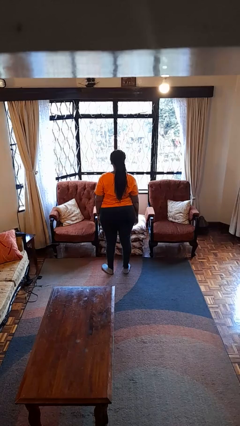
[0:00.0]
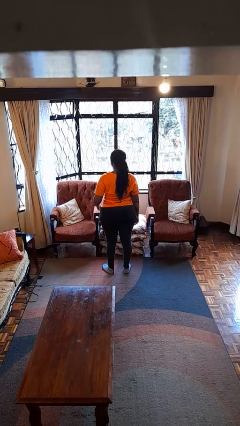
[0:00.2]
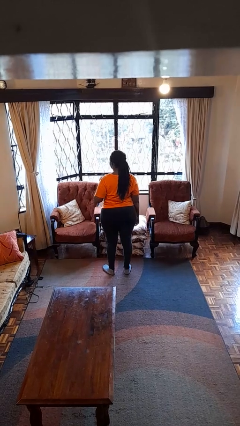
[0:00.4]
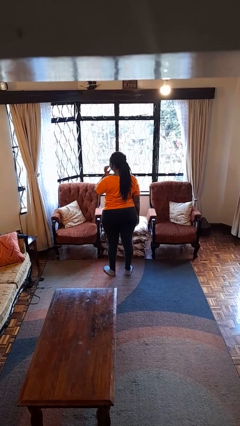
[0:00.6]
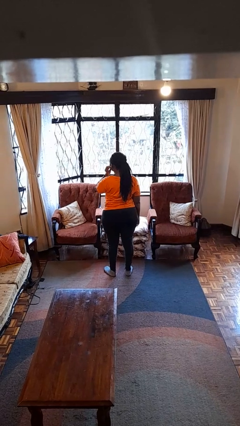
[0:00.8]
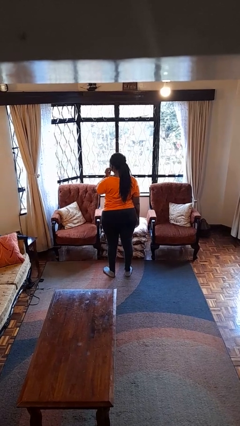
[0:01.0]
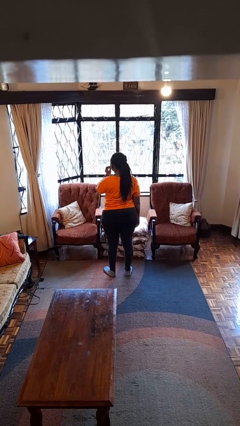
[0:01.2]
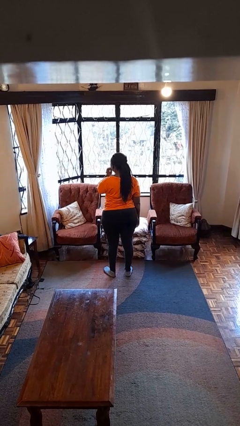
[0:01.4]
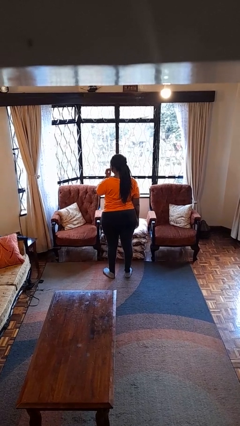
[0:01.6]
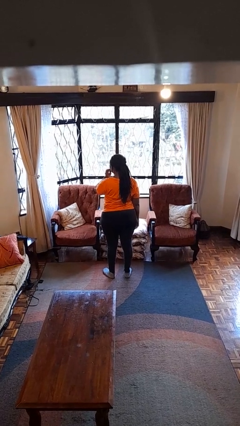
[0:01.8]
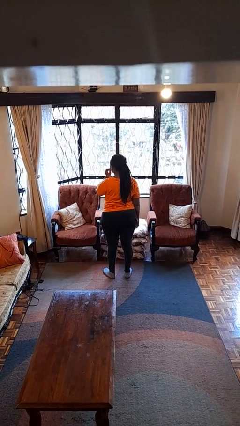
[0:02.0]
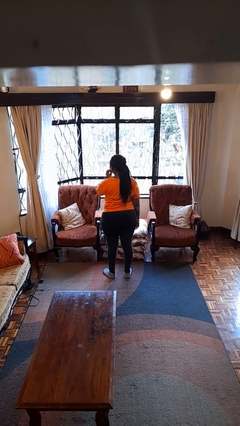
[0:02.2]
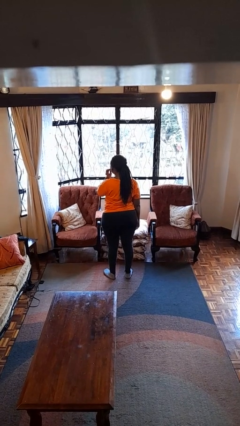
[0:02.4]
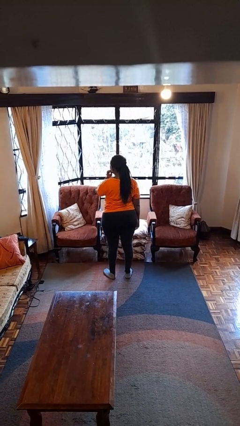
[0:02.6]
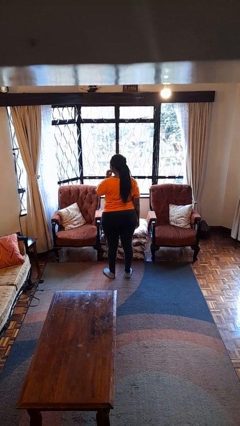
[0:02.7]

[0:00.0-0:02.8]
person touches earlobe

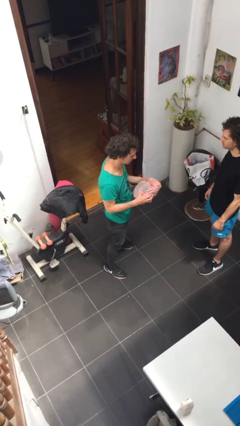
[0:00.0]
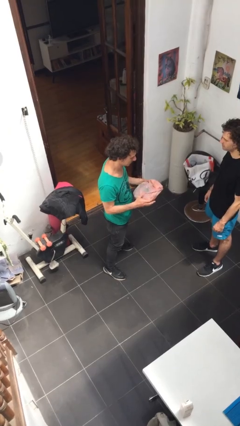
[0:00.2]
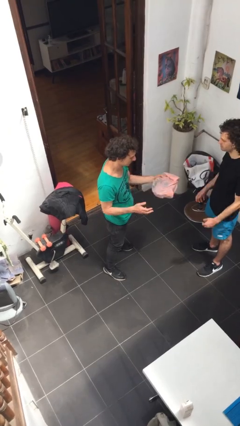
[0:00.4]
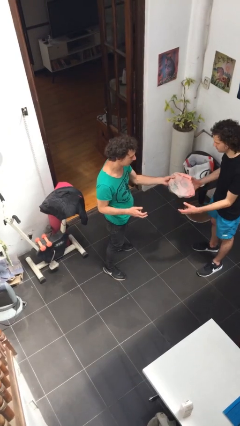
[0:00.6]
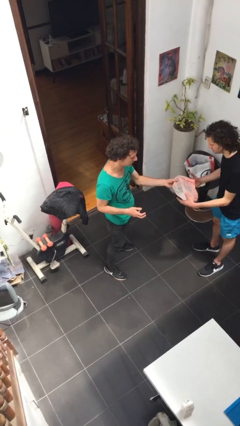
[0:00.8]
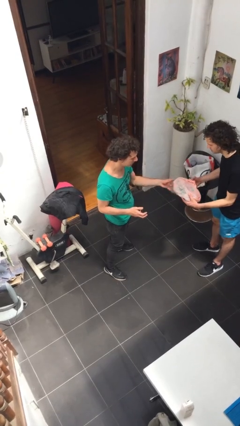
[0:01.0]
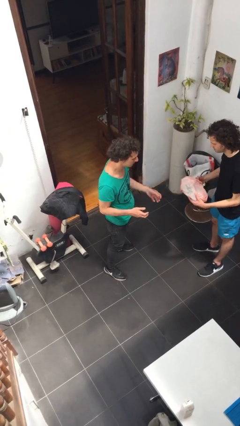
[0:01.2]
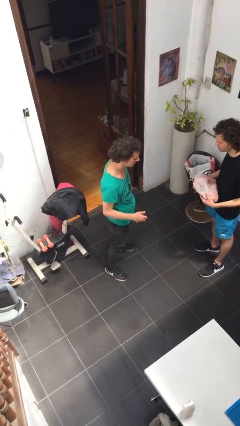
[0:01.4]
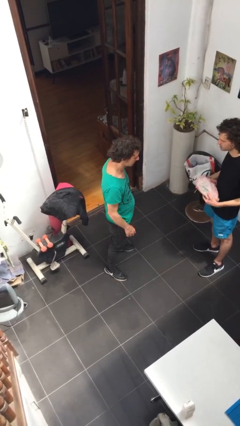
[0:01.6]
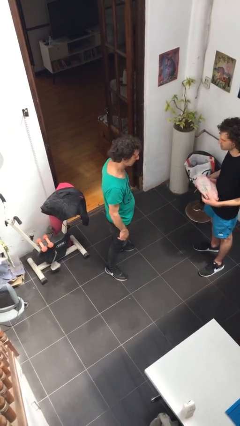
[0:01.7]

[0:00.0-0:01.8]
person transfers object to person

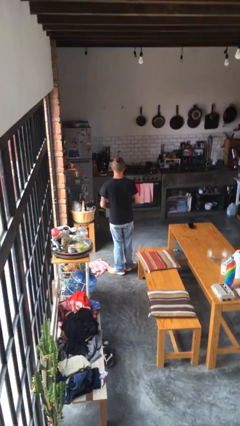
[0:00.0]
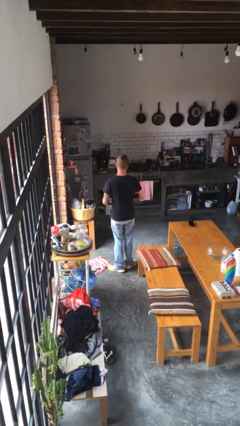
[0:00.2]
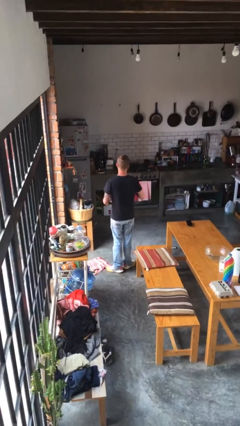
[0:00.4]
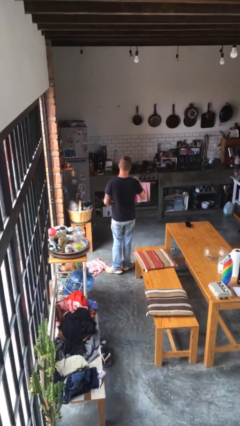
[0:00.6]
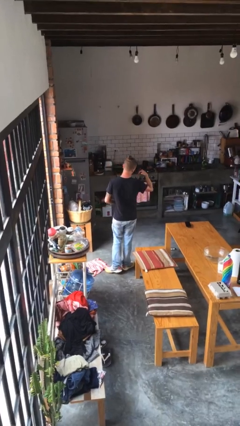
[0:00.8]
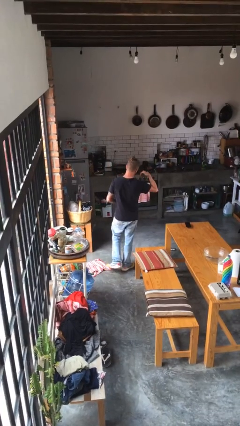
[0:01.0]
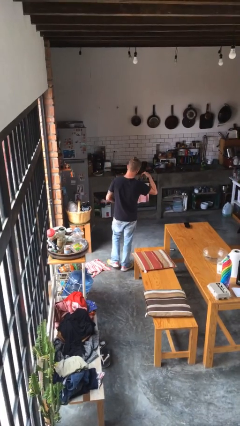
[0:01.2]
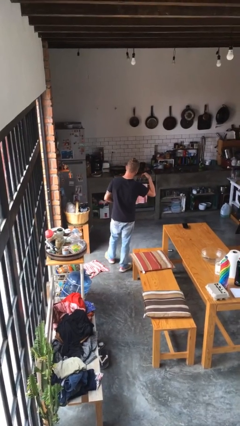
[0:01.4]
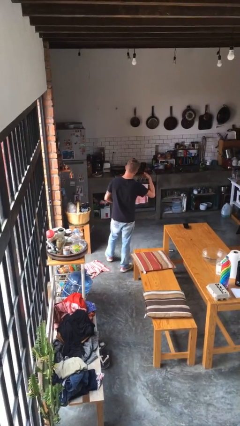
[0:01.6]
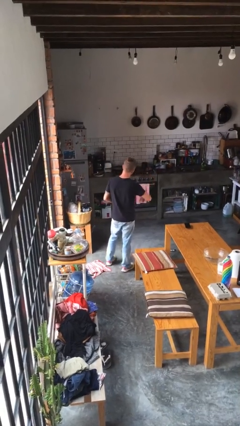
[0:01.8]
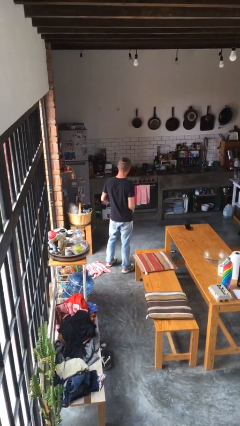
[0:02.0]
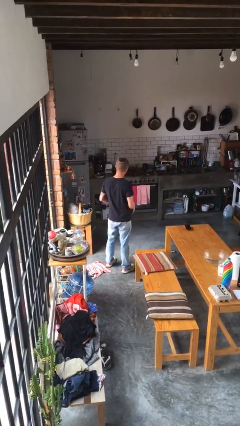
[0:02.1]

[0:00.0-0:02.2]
person gestures call me

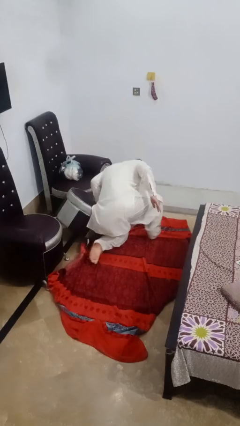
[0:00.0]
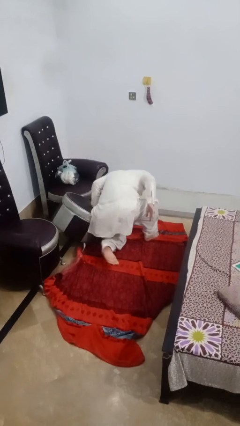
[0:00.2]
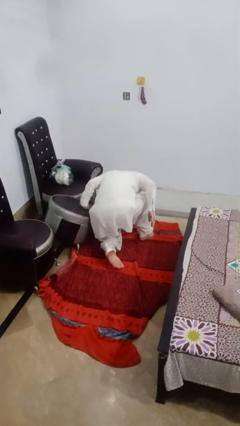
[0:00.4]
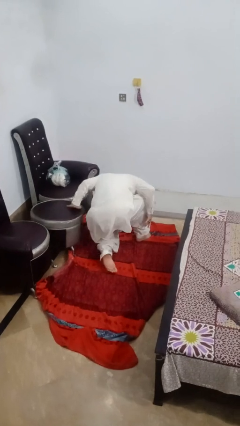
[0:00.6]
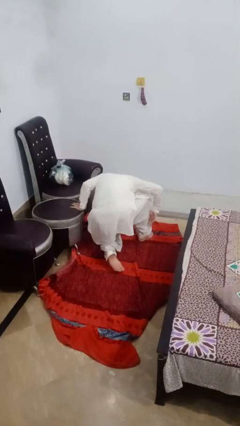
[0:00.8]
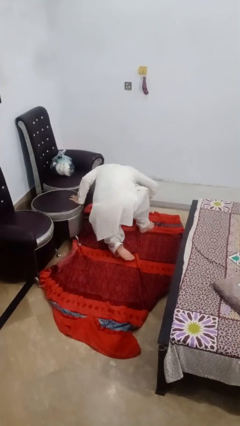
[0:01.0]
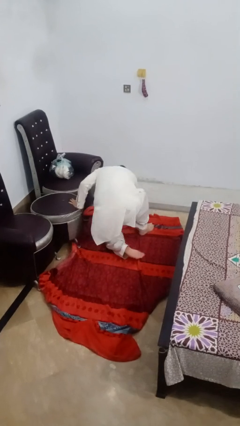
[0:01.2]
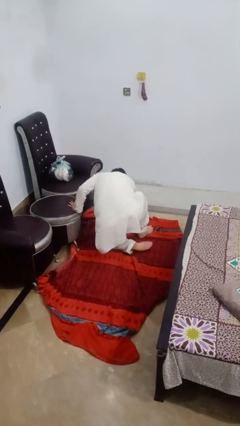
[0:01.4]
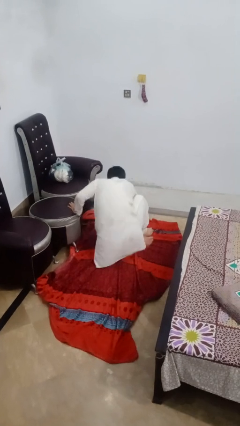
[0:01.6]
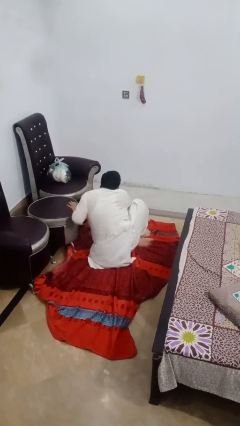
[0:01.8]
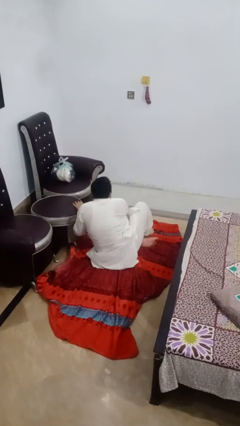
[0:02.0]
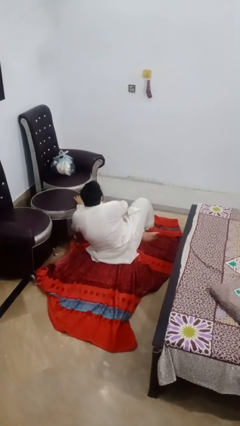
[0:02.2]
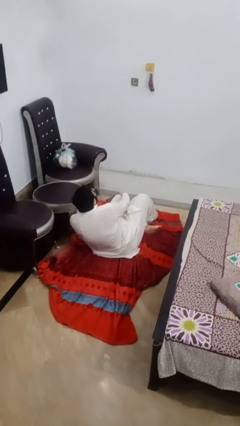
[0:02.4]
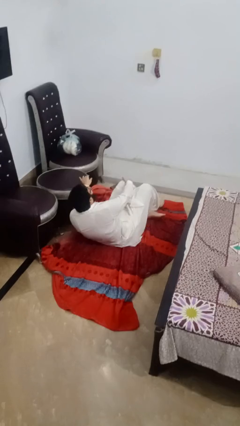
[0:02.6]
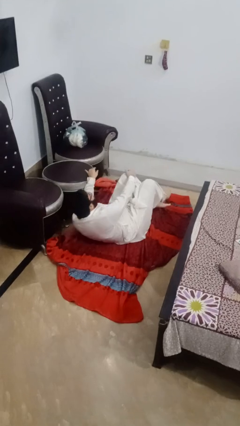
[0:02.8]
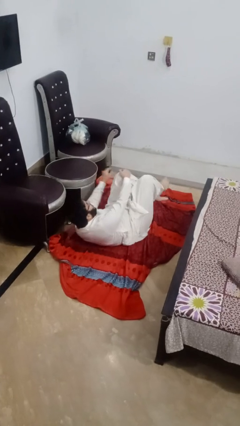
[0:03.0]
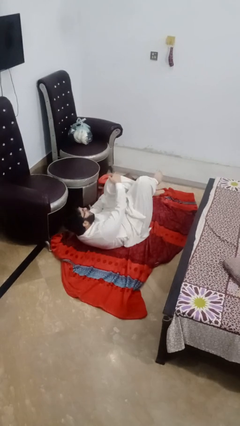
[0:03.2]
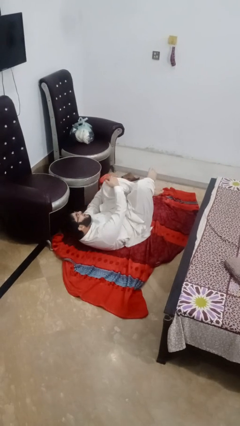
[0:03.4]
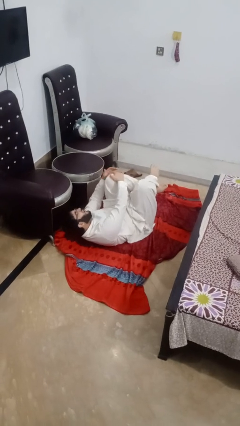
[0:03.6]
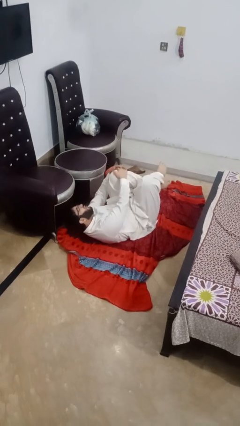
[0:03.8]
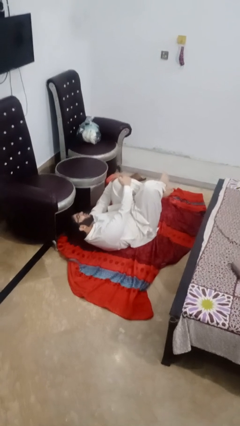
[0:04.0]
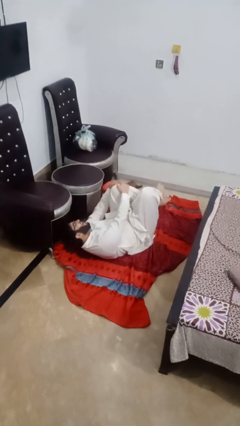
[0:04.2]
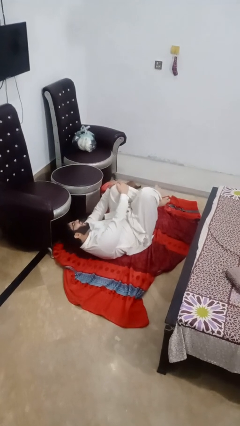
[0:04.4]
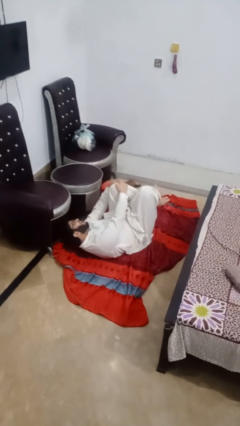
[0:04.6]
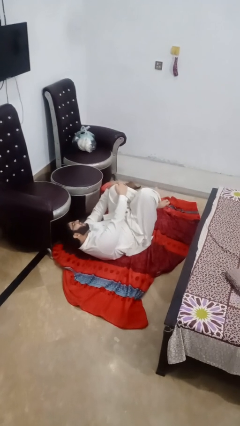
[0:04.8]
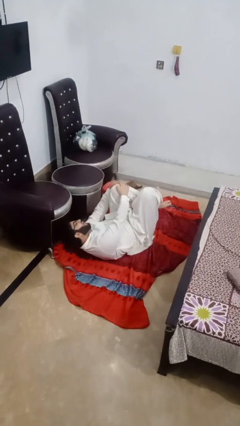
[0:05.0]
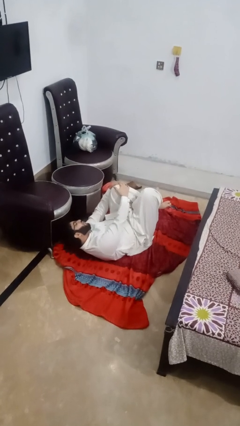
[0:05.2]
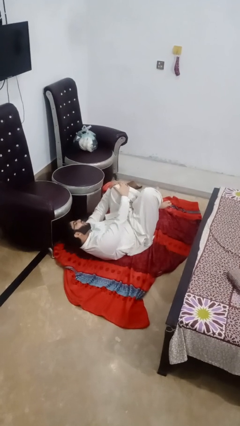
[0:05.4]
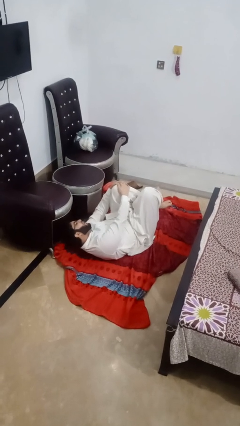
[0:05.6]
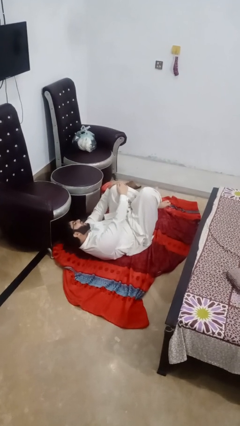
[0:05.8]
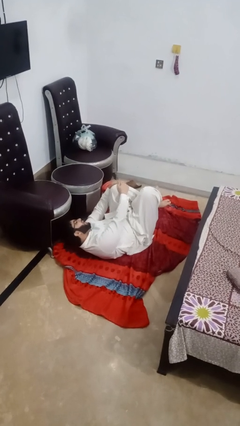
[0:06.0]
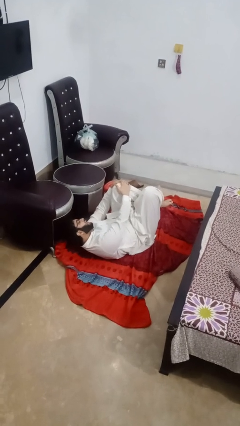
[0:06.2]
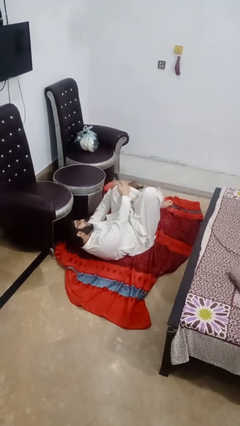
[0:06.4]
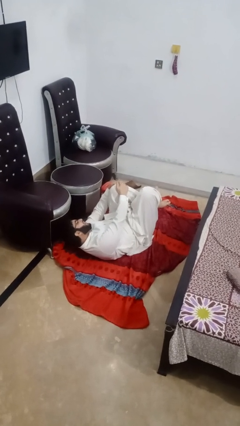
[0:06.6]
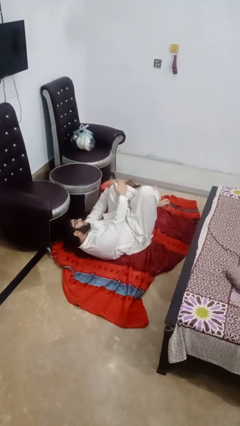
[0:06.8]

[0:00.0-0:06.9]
person lies down on floor

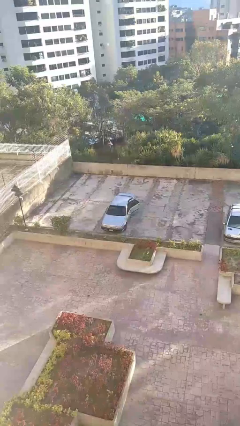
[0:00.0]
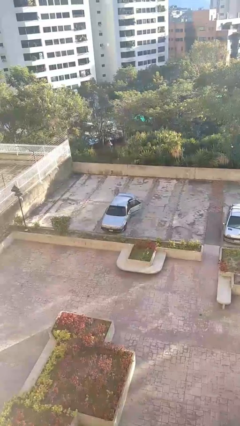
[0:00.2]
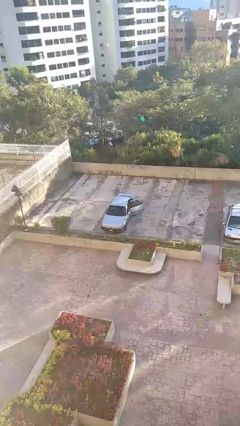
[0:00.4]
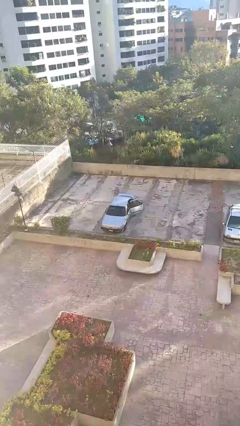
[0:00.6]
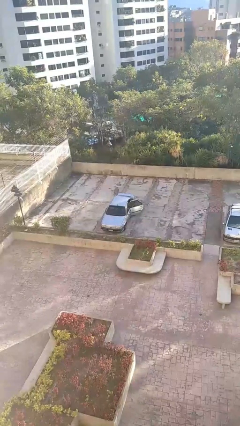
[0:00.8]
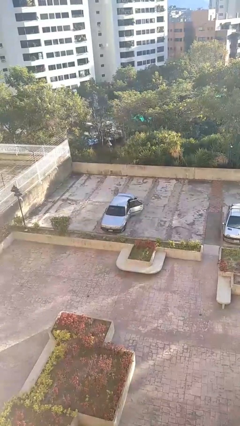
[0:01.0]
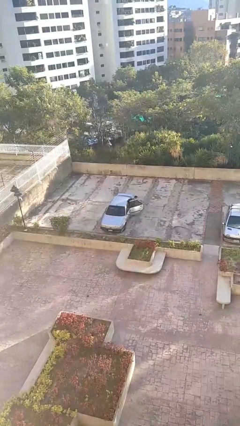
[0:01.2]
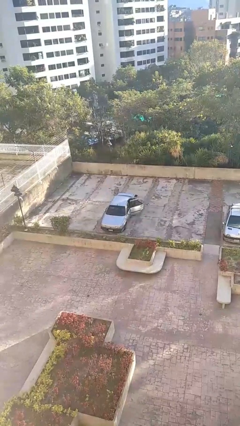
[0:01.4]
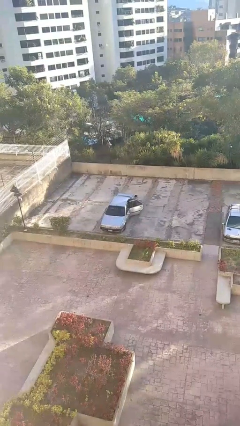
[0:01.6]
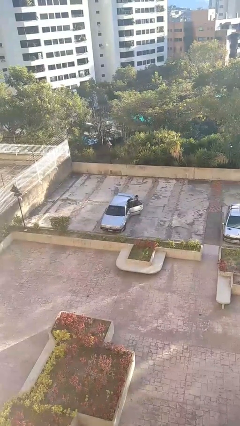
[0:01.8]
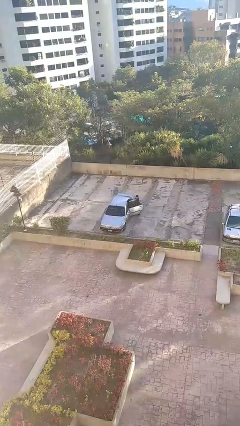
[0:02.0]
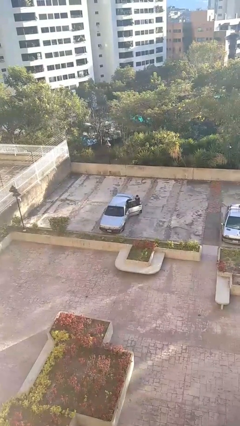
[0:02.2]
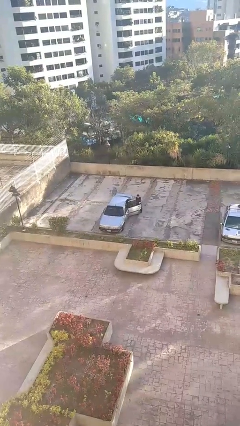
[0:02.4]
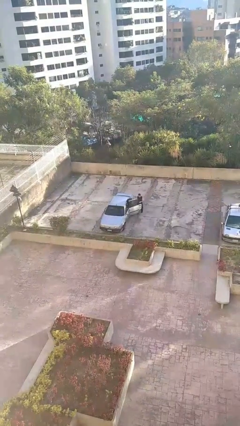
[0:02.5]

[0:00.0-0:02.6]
car drops off person

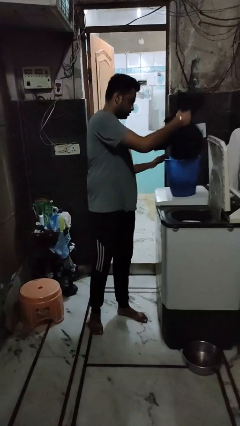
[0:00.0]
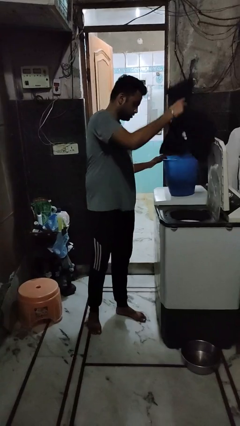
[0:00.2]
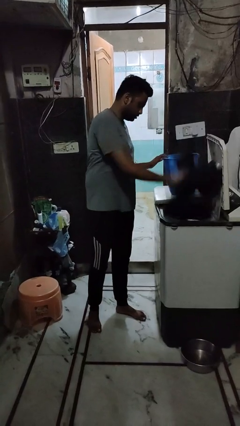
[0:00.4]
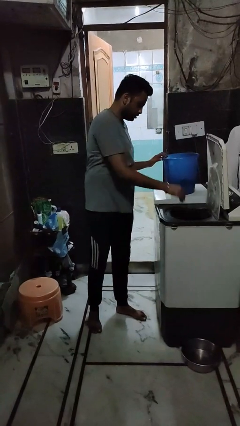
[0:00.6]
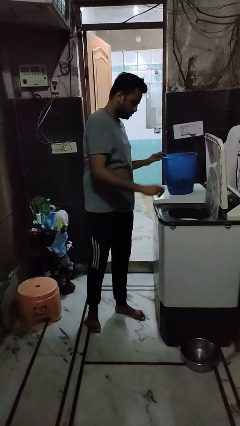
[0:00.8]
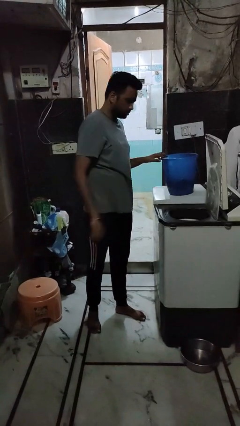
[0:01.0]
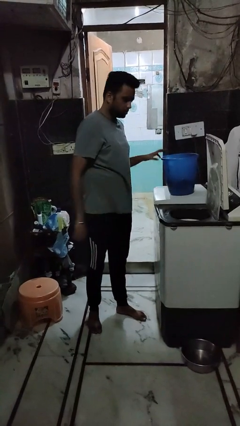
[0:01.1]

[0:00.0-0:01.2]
person loads dryer
